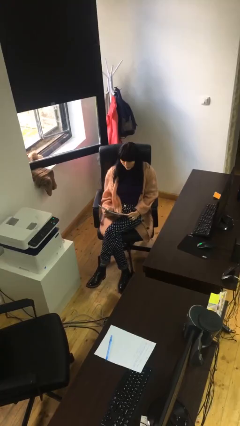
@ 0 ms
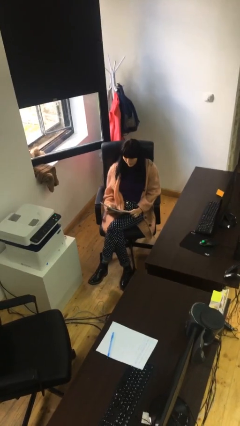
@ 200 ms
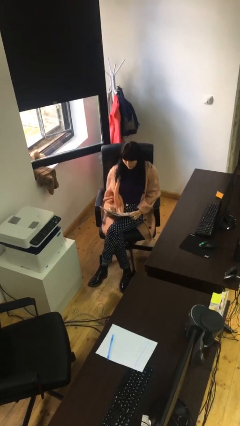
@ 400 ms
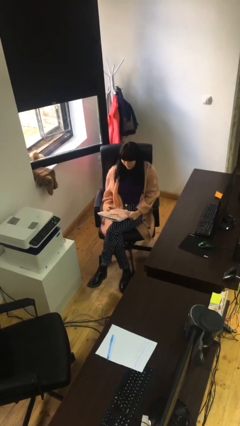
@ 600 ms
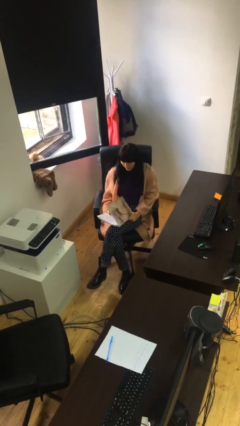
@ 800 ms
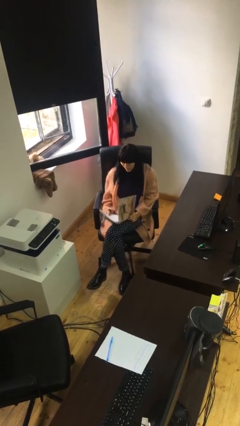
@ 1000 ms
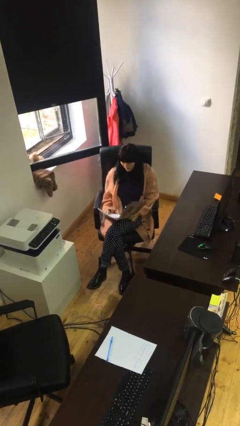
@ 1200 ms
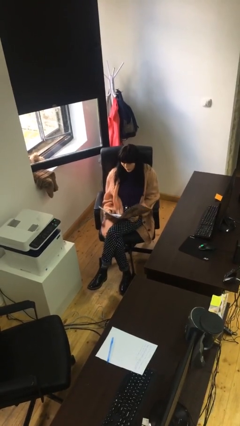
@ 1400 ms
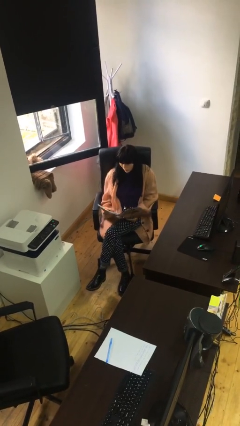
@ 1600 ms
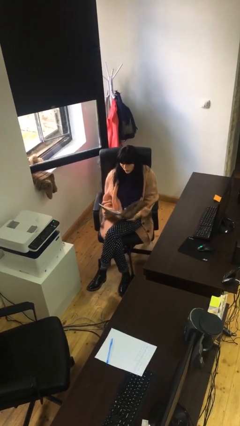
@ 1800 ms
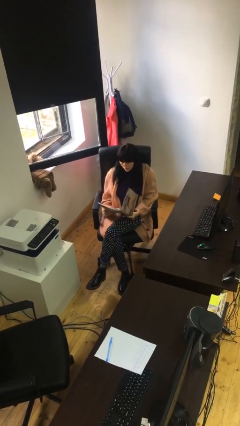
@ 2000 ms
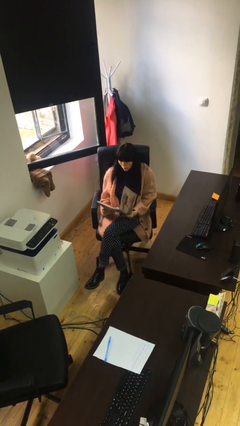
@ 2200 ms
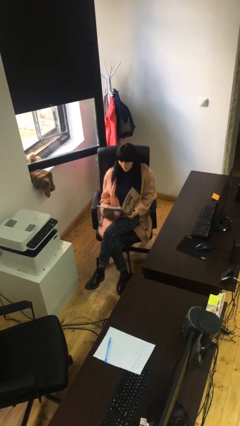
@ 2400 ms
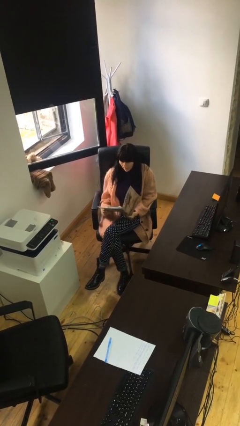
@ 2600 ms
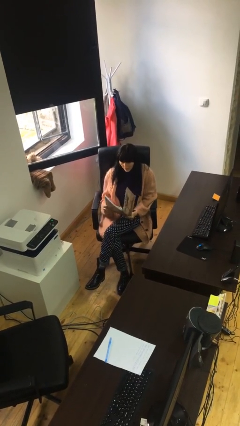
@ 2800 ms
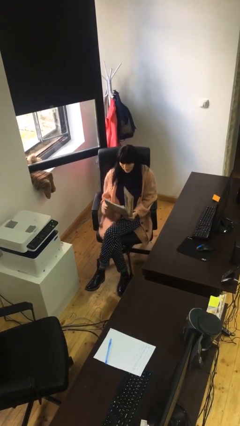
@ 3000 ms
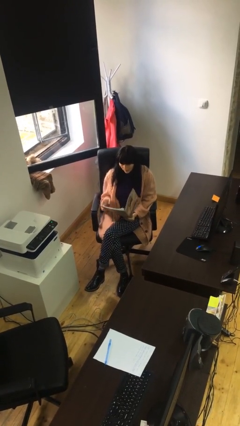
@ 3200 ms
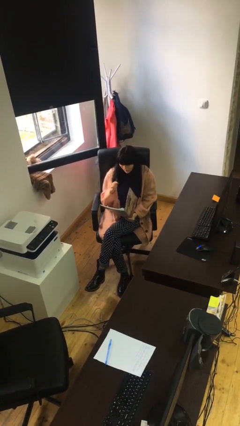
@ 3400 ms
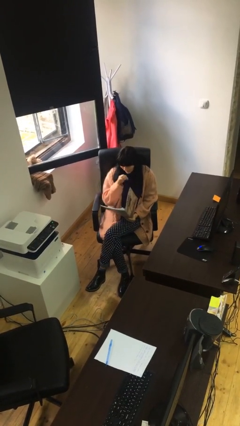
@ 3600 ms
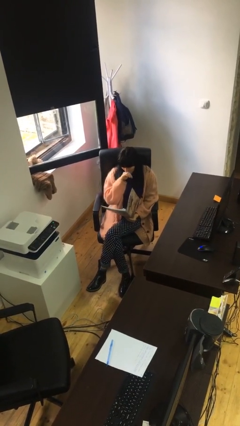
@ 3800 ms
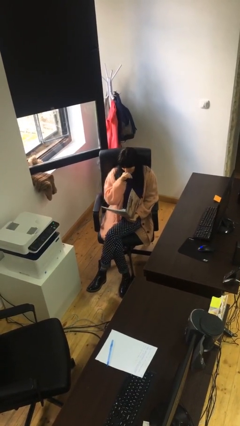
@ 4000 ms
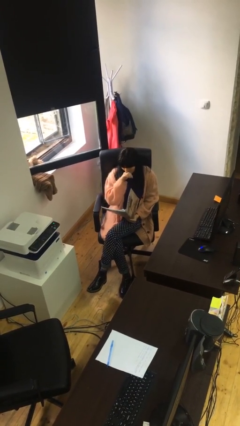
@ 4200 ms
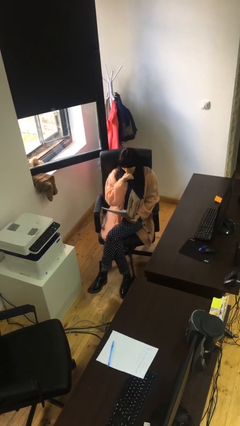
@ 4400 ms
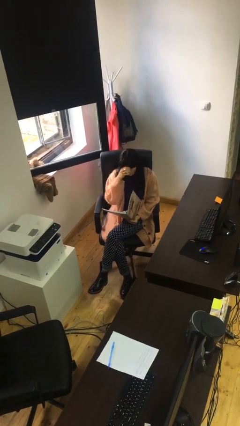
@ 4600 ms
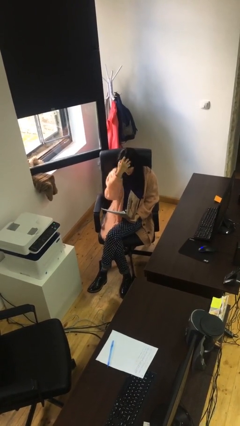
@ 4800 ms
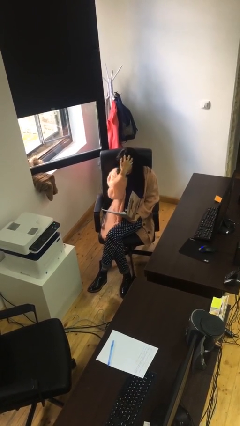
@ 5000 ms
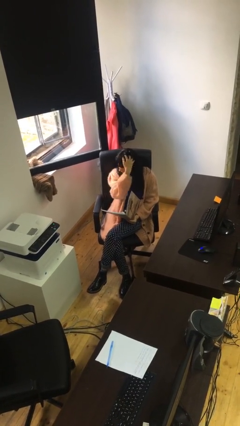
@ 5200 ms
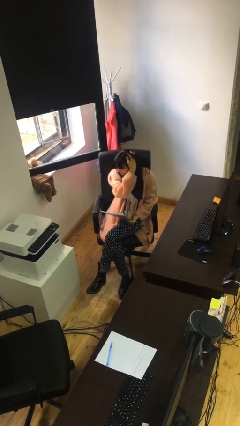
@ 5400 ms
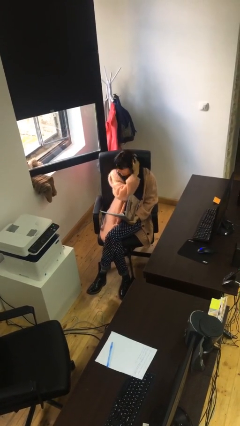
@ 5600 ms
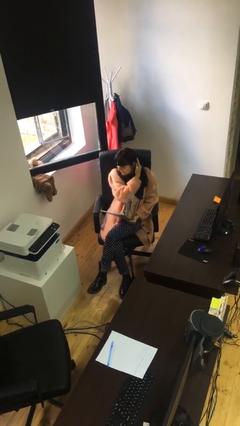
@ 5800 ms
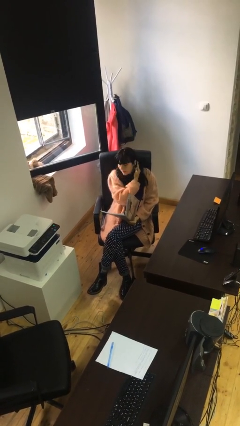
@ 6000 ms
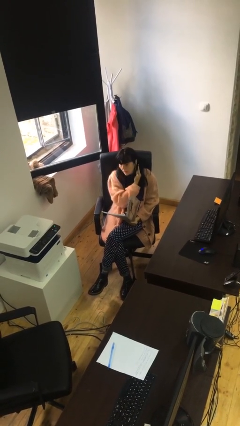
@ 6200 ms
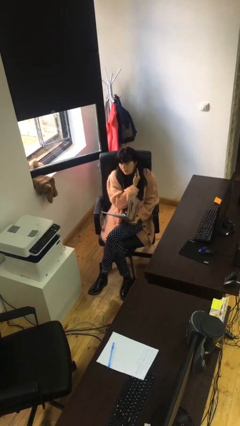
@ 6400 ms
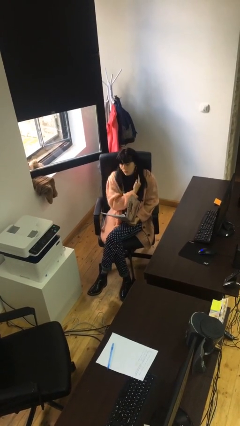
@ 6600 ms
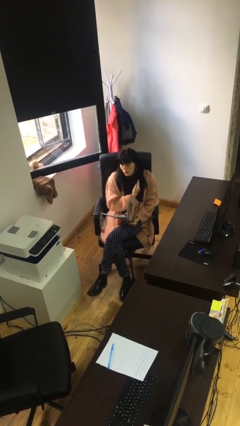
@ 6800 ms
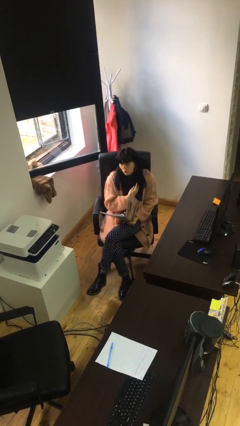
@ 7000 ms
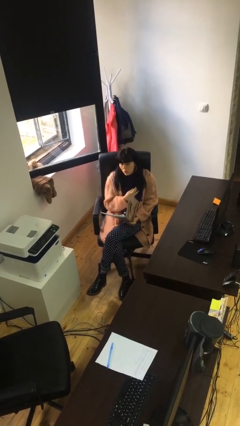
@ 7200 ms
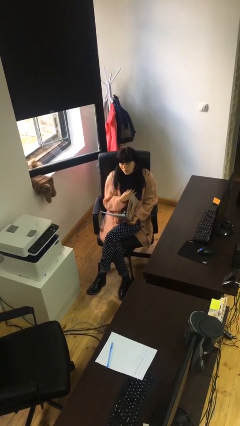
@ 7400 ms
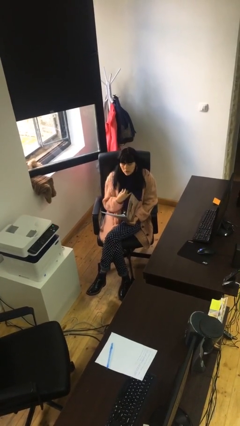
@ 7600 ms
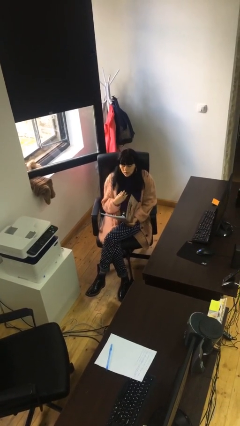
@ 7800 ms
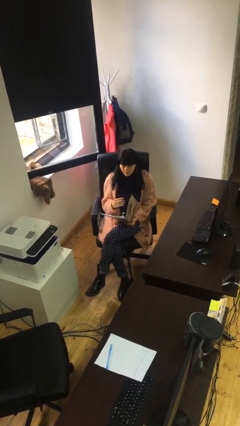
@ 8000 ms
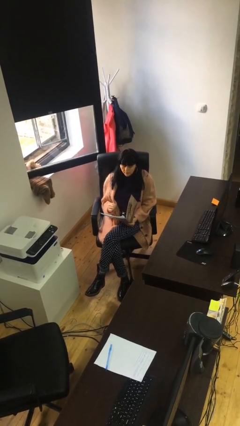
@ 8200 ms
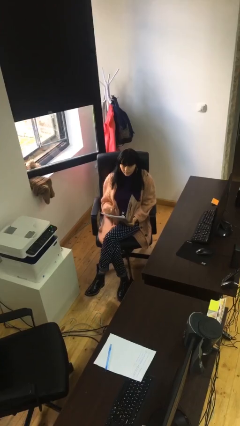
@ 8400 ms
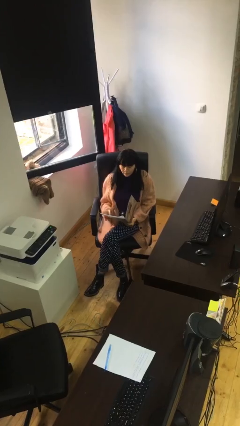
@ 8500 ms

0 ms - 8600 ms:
person reads document

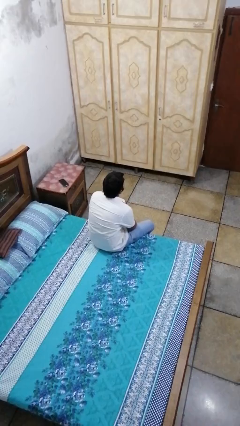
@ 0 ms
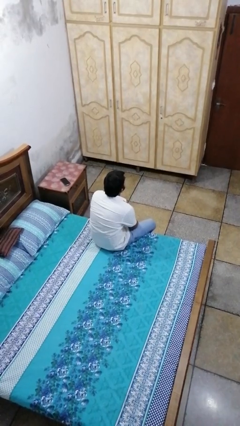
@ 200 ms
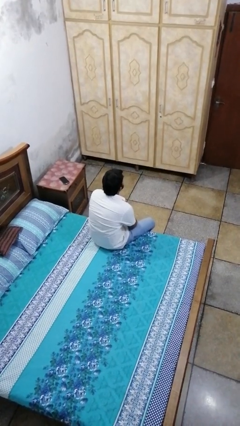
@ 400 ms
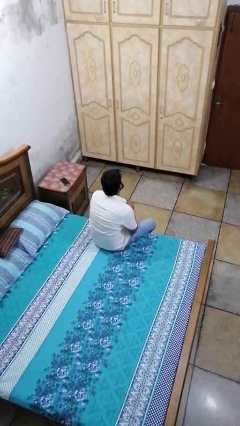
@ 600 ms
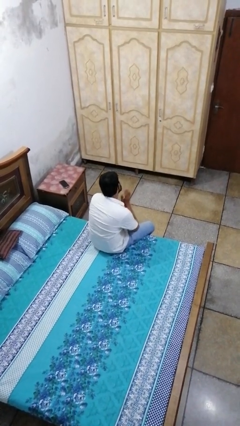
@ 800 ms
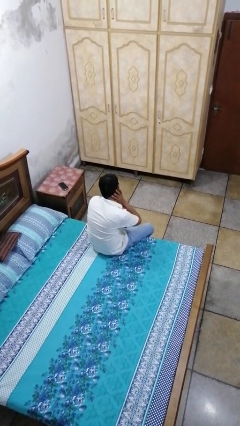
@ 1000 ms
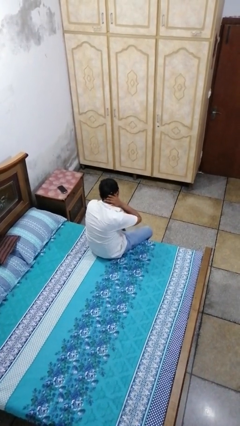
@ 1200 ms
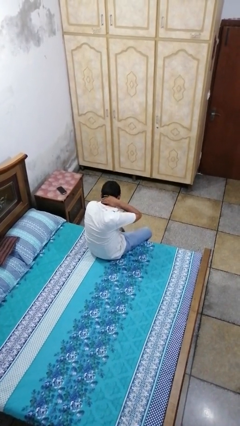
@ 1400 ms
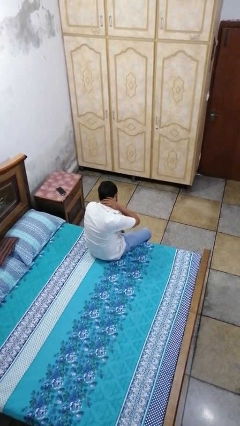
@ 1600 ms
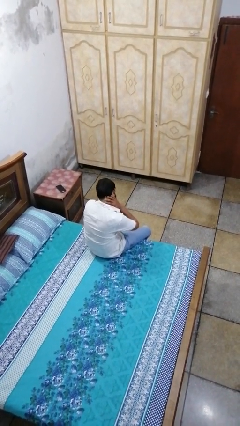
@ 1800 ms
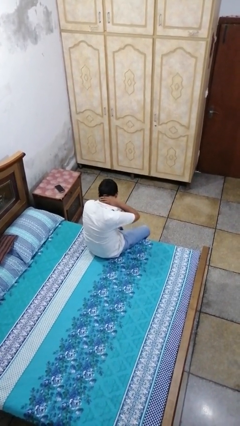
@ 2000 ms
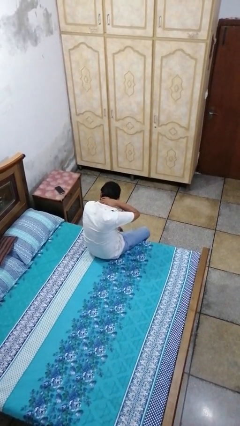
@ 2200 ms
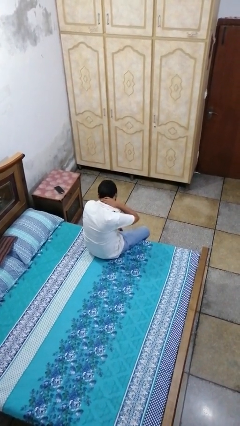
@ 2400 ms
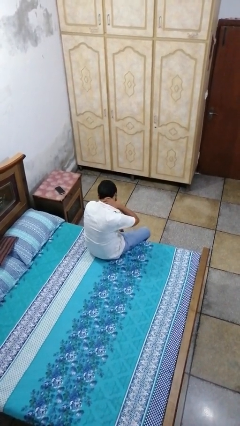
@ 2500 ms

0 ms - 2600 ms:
person rubs neck

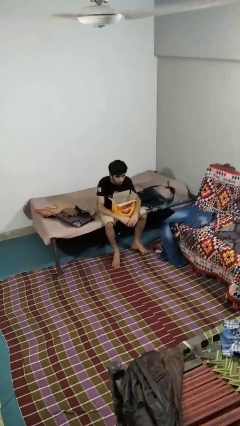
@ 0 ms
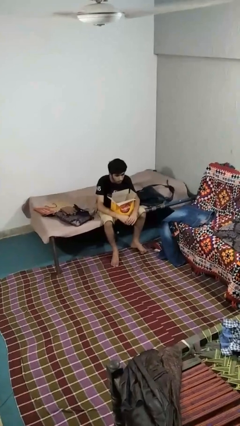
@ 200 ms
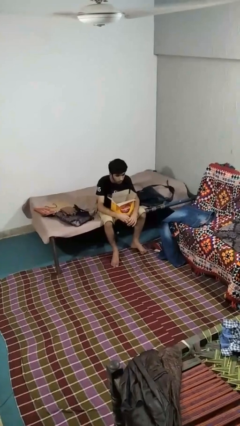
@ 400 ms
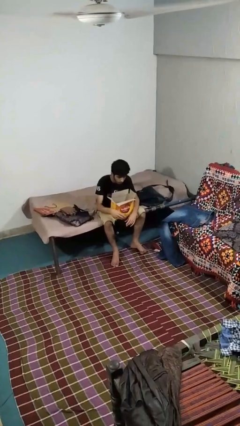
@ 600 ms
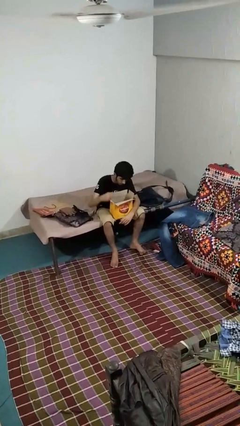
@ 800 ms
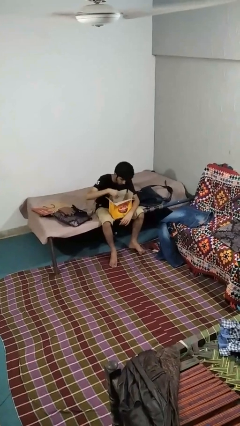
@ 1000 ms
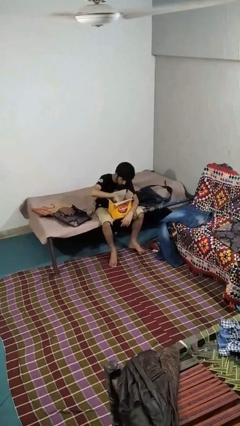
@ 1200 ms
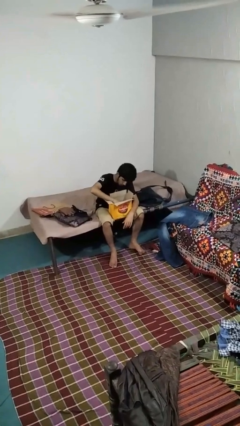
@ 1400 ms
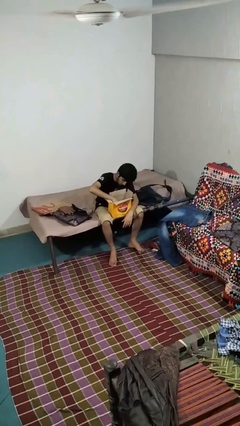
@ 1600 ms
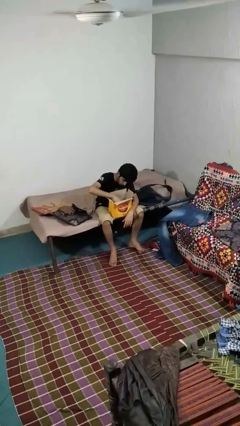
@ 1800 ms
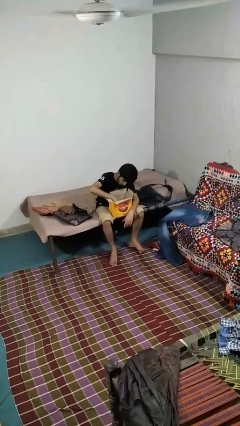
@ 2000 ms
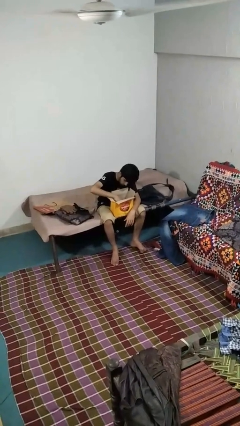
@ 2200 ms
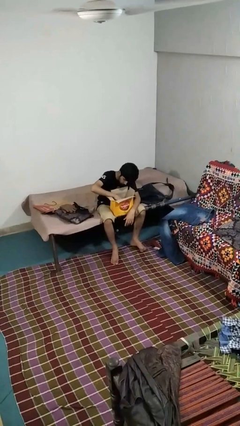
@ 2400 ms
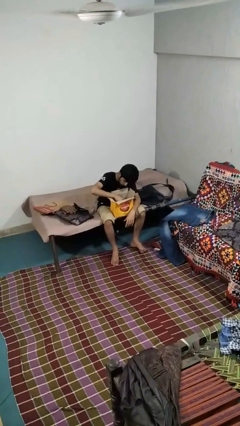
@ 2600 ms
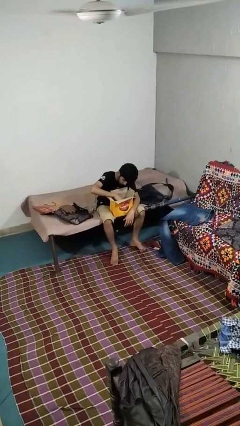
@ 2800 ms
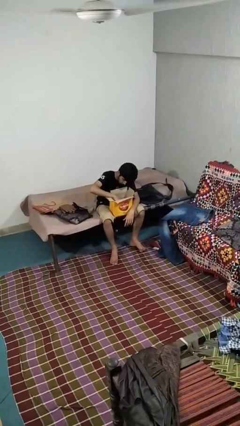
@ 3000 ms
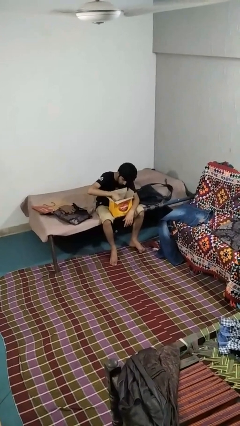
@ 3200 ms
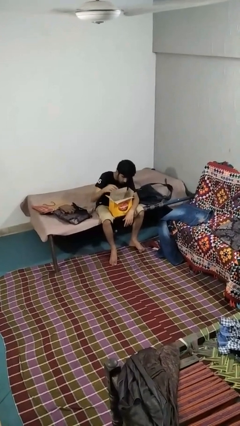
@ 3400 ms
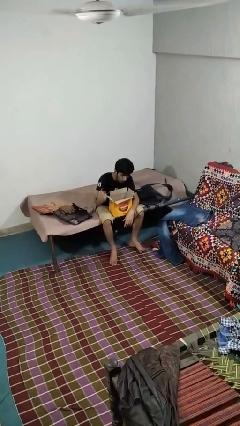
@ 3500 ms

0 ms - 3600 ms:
person searches in box

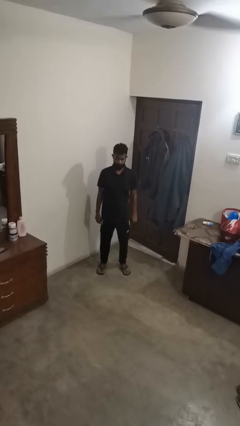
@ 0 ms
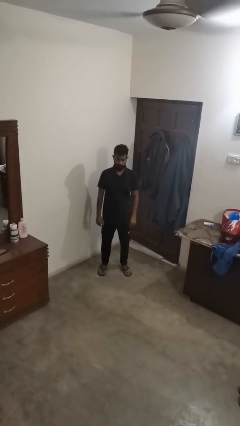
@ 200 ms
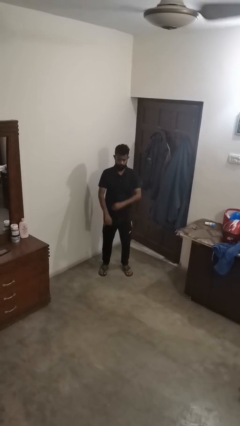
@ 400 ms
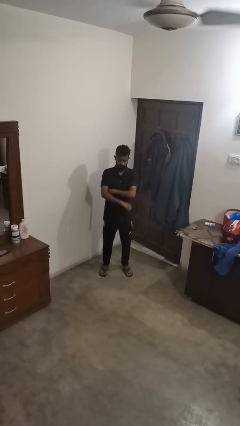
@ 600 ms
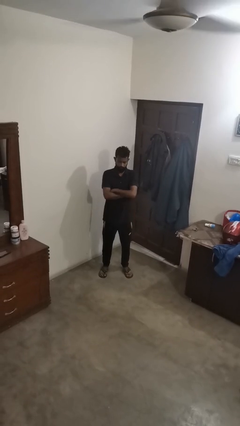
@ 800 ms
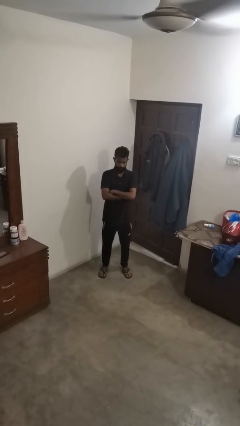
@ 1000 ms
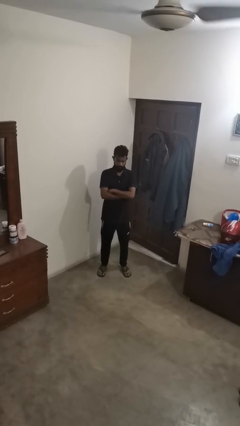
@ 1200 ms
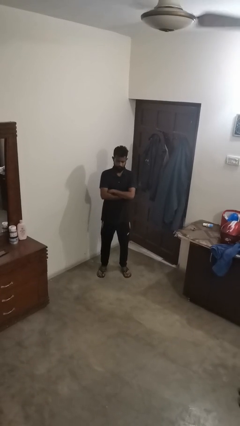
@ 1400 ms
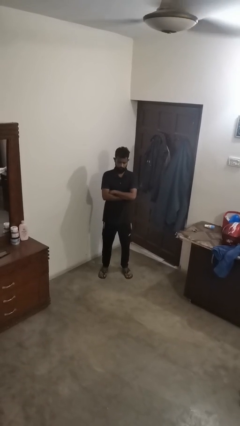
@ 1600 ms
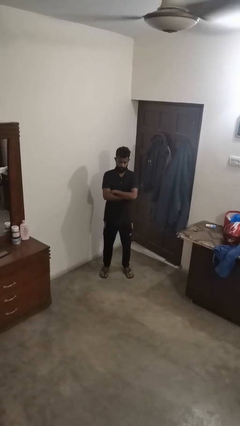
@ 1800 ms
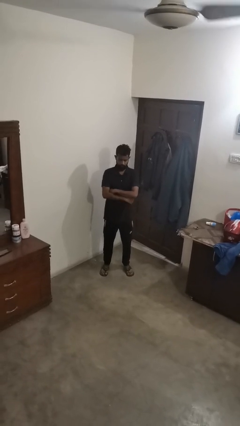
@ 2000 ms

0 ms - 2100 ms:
person crosses arms

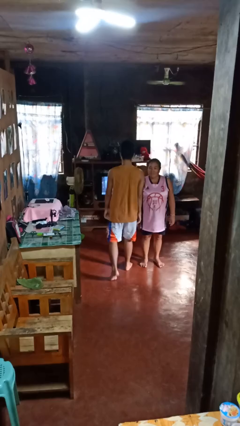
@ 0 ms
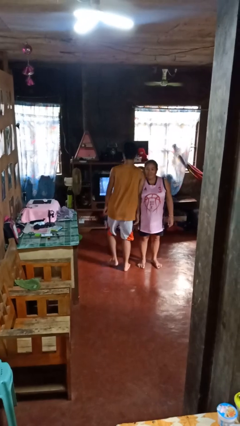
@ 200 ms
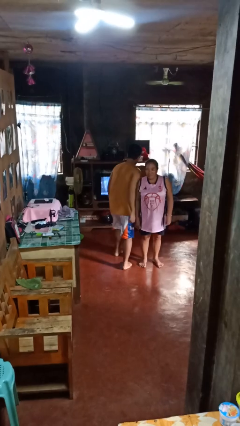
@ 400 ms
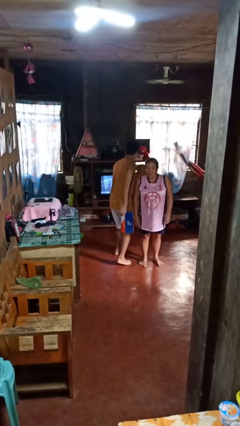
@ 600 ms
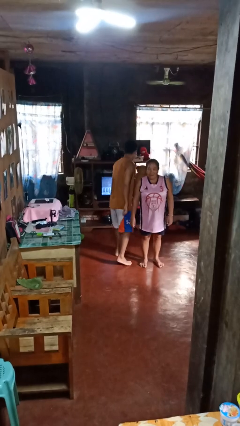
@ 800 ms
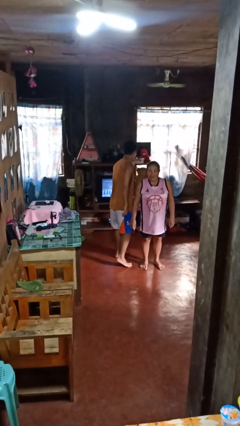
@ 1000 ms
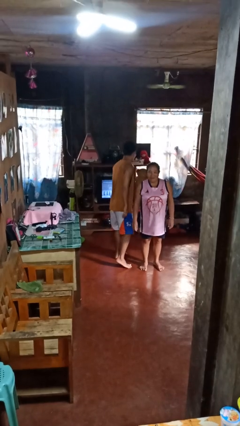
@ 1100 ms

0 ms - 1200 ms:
person bumps into person
